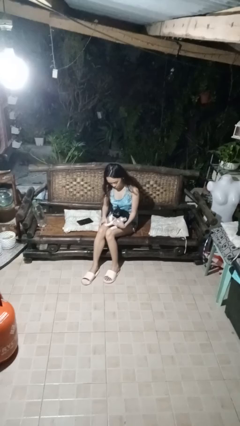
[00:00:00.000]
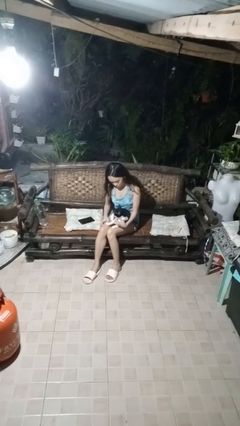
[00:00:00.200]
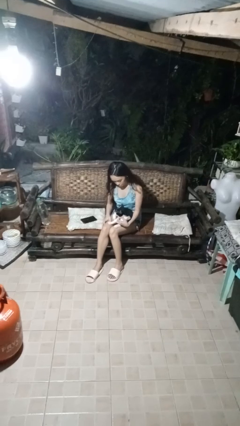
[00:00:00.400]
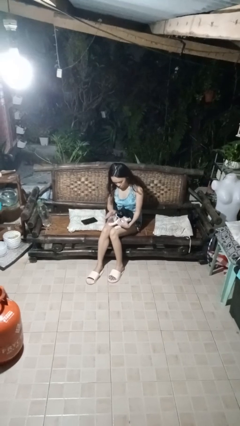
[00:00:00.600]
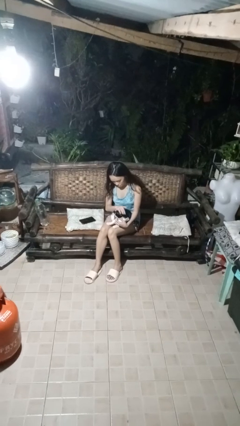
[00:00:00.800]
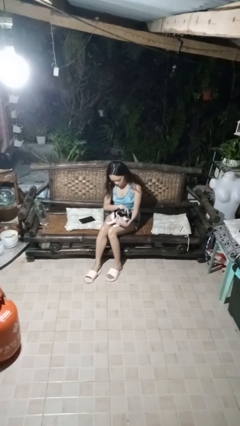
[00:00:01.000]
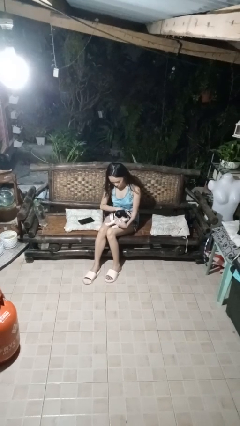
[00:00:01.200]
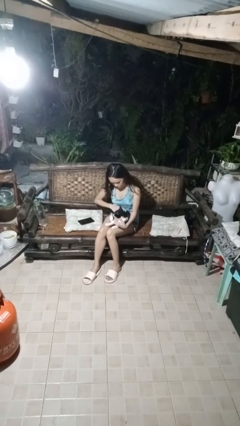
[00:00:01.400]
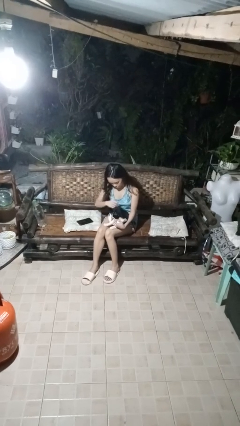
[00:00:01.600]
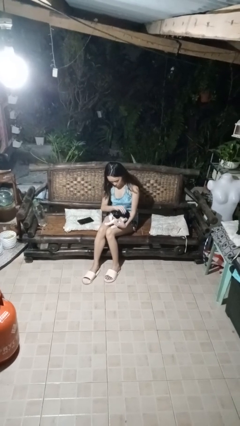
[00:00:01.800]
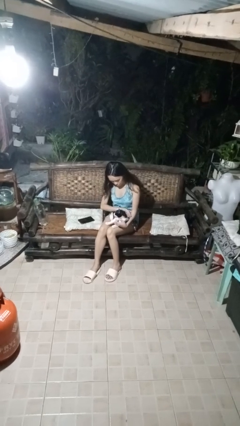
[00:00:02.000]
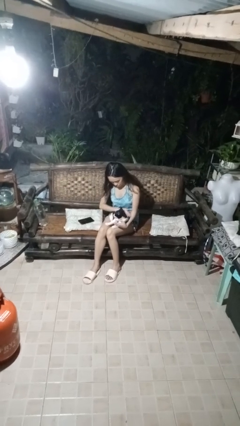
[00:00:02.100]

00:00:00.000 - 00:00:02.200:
person pets cat

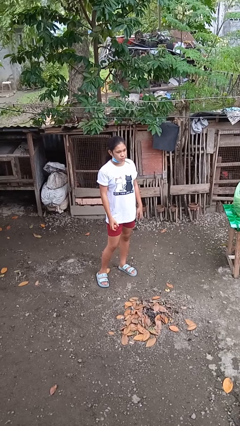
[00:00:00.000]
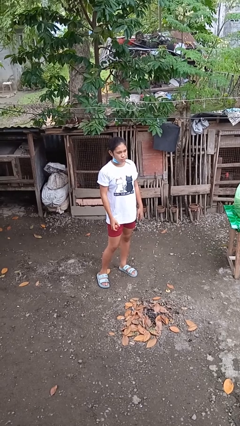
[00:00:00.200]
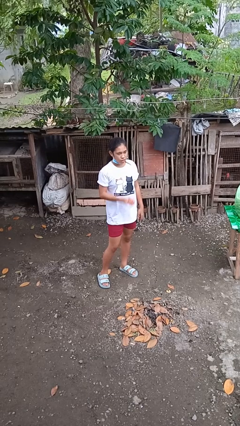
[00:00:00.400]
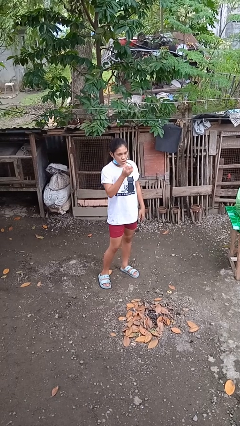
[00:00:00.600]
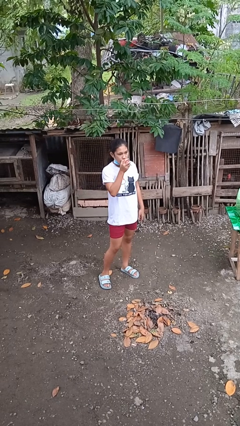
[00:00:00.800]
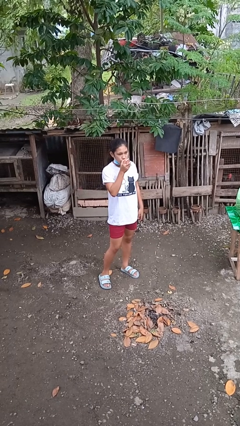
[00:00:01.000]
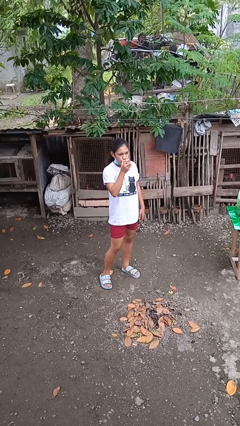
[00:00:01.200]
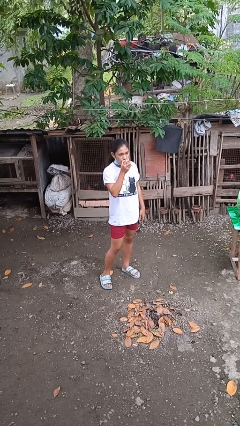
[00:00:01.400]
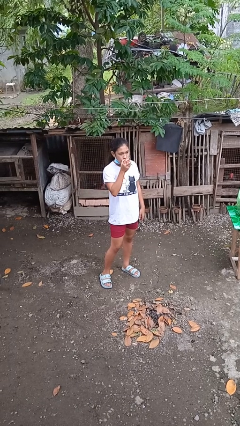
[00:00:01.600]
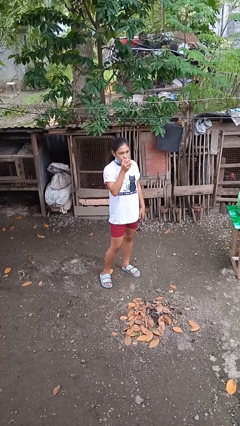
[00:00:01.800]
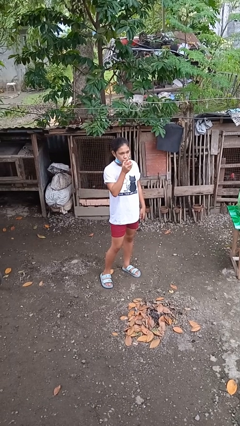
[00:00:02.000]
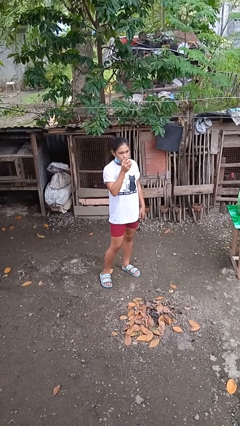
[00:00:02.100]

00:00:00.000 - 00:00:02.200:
person eats apple

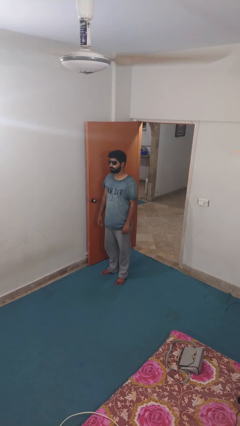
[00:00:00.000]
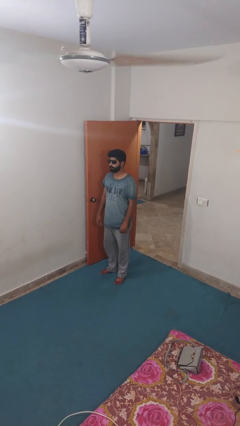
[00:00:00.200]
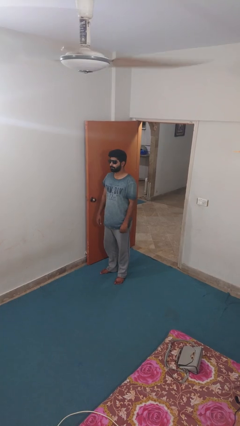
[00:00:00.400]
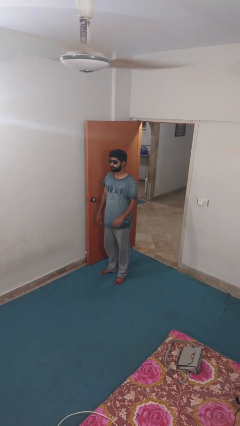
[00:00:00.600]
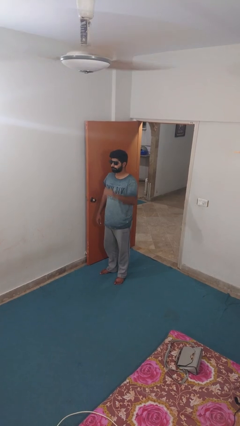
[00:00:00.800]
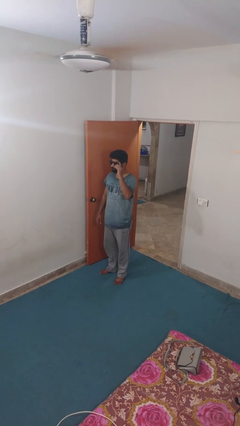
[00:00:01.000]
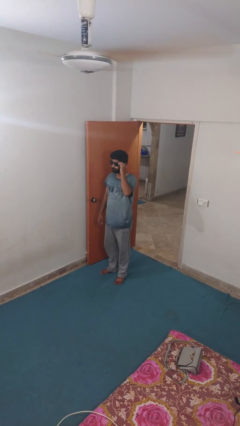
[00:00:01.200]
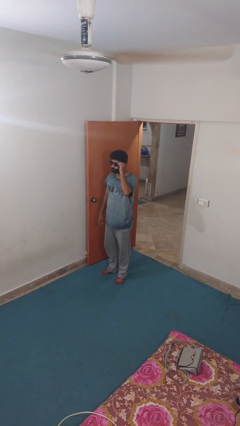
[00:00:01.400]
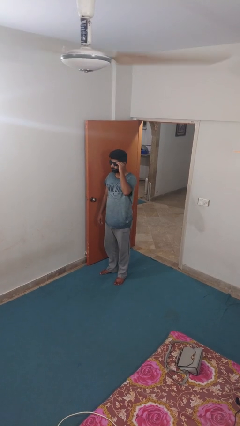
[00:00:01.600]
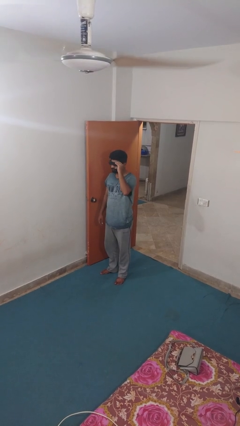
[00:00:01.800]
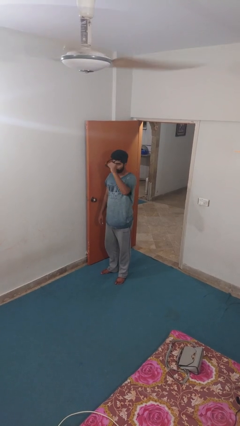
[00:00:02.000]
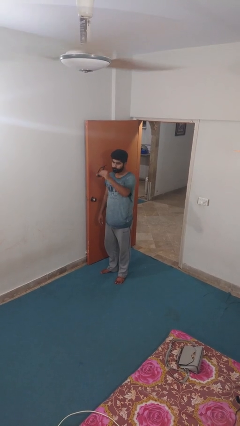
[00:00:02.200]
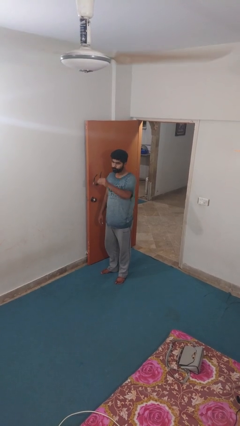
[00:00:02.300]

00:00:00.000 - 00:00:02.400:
person takes off sunglasses

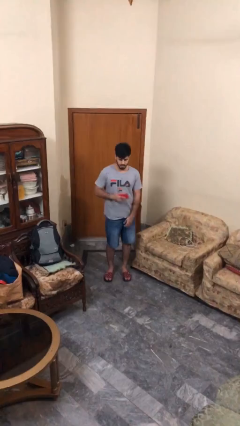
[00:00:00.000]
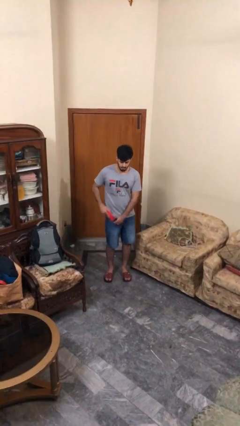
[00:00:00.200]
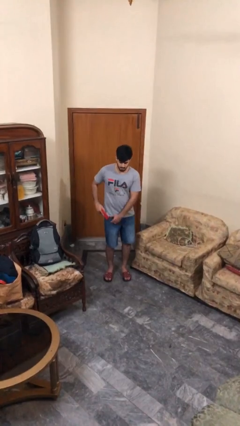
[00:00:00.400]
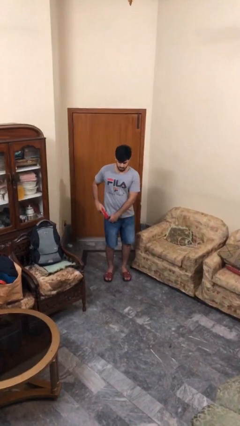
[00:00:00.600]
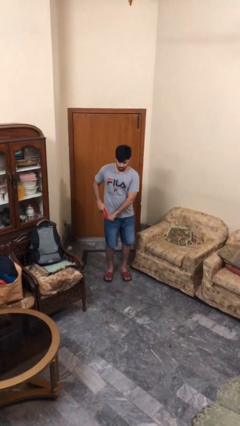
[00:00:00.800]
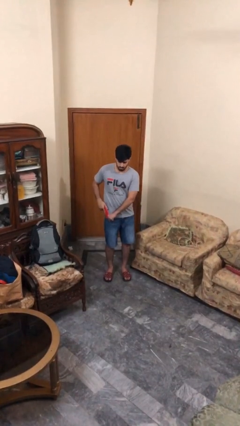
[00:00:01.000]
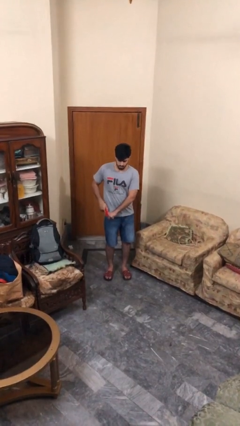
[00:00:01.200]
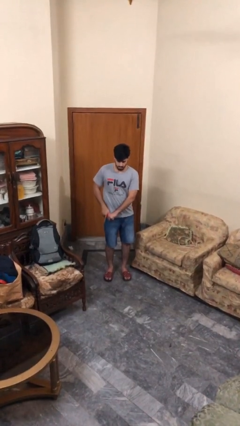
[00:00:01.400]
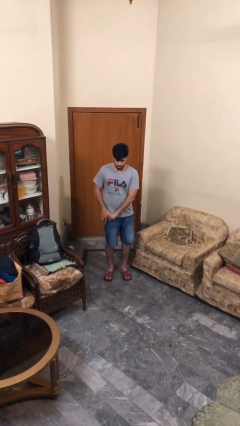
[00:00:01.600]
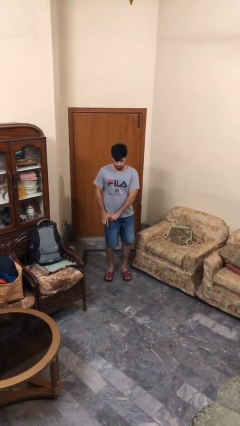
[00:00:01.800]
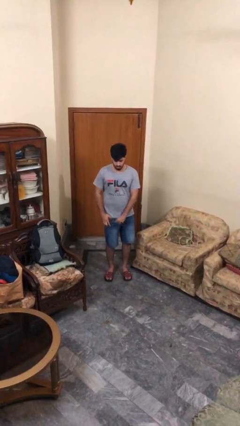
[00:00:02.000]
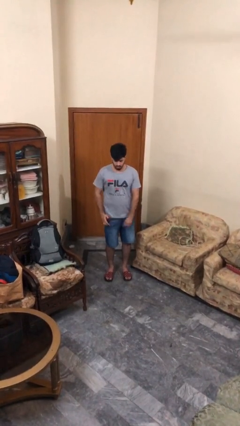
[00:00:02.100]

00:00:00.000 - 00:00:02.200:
person puts phone into pocket

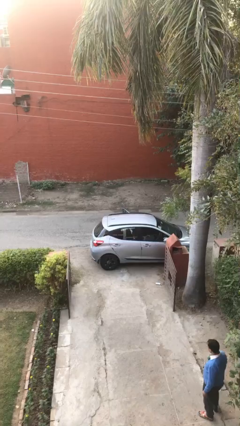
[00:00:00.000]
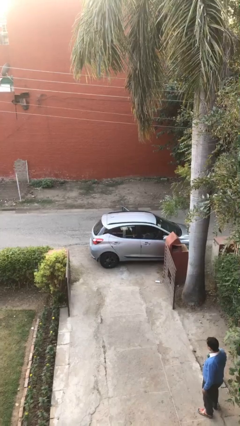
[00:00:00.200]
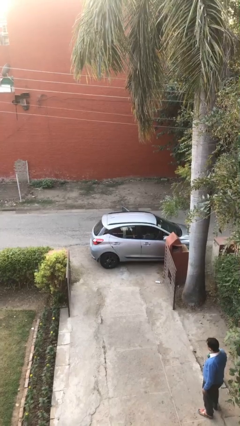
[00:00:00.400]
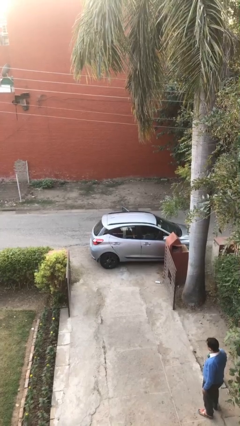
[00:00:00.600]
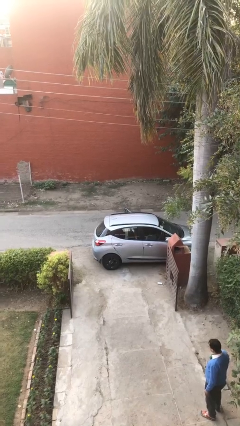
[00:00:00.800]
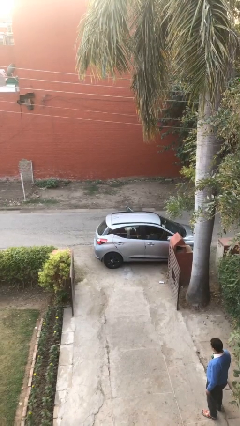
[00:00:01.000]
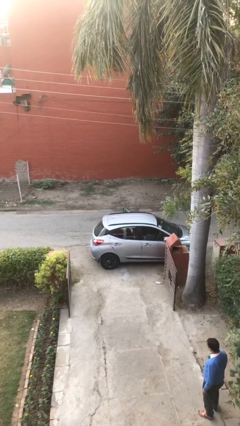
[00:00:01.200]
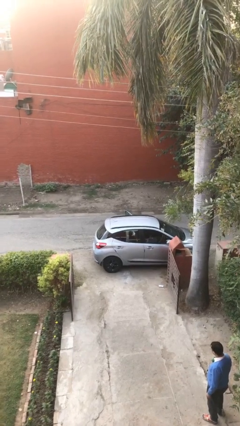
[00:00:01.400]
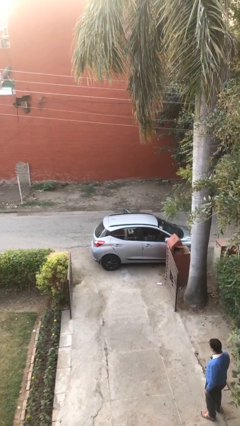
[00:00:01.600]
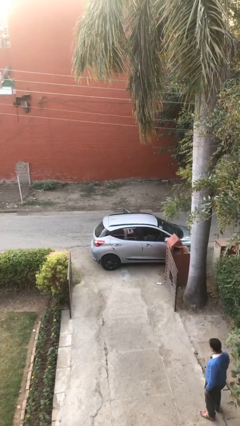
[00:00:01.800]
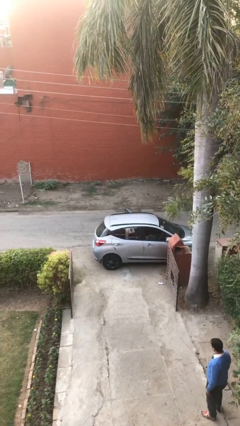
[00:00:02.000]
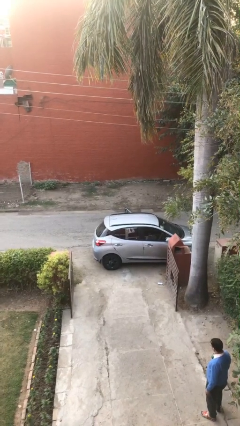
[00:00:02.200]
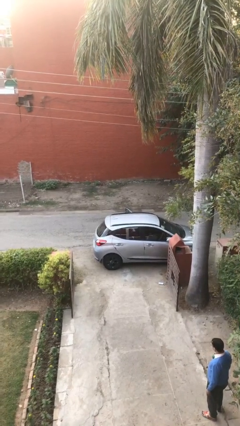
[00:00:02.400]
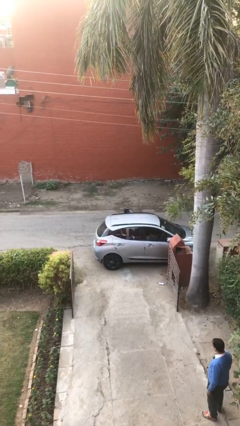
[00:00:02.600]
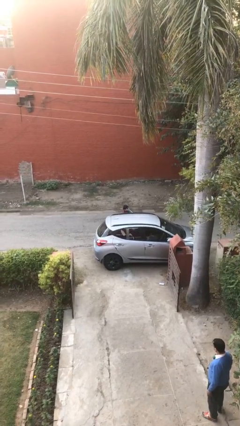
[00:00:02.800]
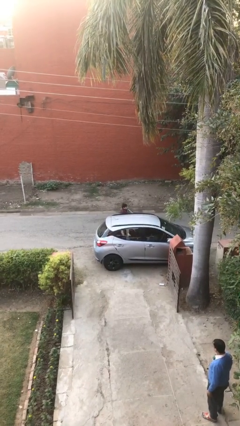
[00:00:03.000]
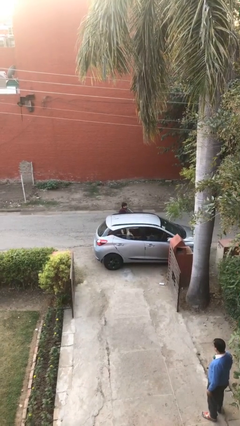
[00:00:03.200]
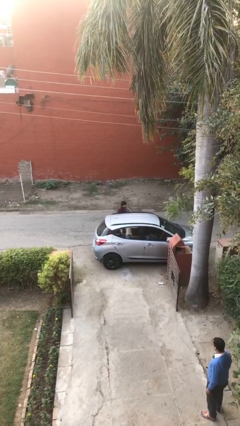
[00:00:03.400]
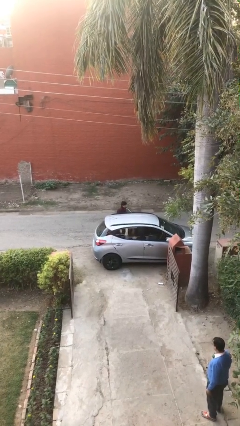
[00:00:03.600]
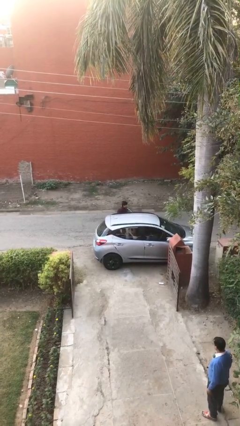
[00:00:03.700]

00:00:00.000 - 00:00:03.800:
person exits car

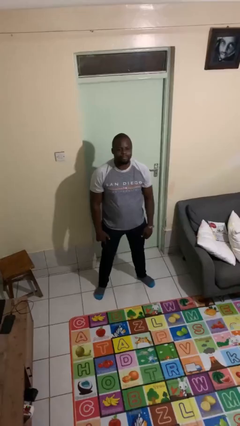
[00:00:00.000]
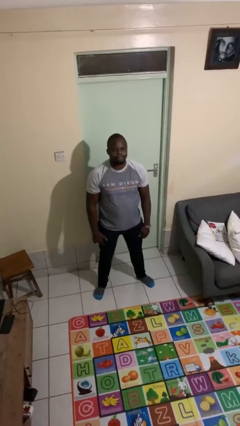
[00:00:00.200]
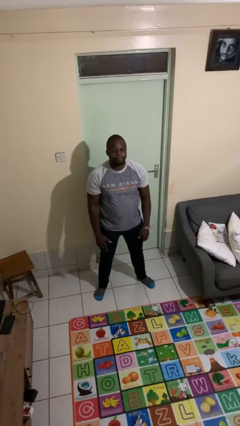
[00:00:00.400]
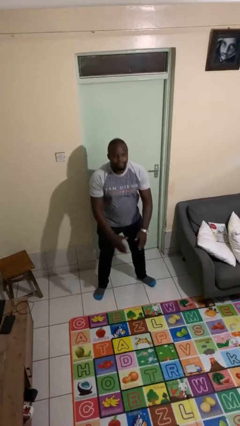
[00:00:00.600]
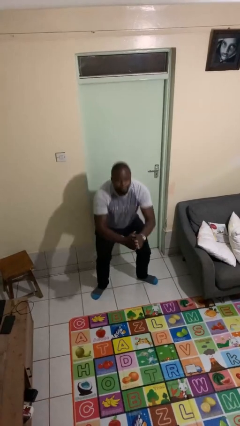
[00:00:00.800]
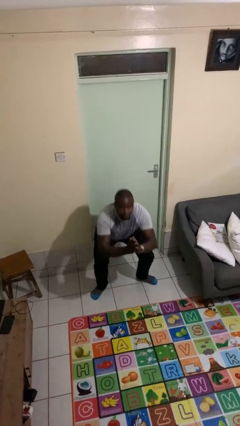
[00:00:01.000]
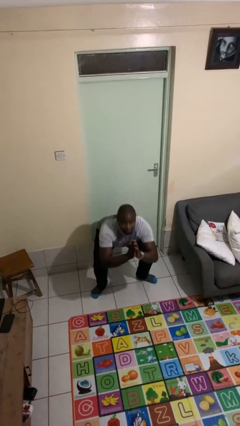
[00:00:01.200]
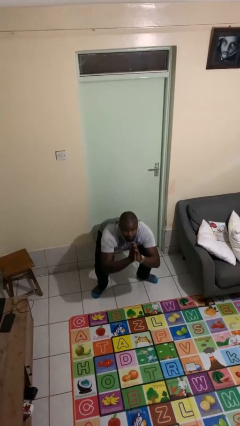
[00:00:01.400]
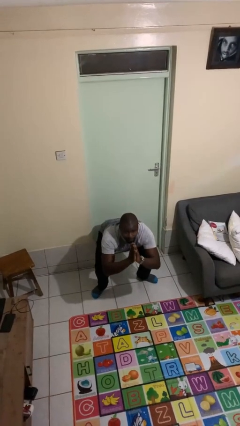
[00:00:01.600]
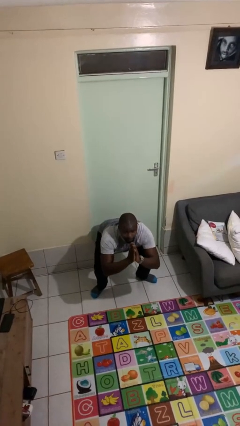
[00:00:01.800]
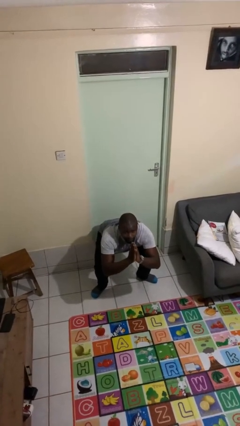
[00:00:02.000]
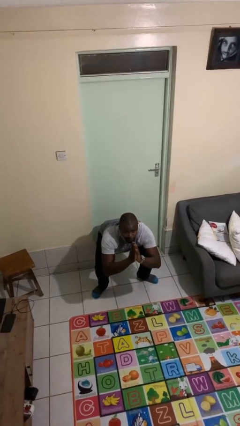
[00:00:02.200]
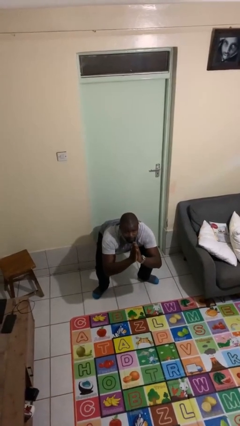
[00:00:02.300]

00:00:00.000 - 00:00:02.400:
person squats

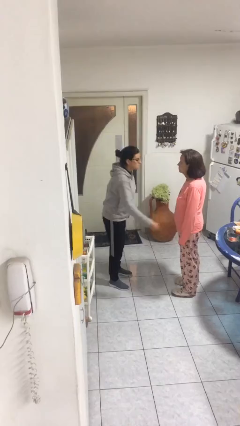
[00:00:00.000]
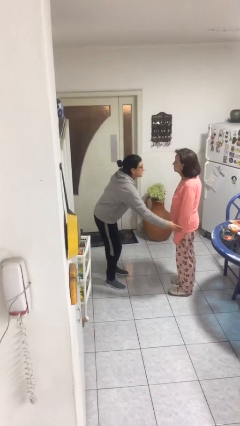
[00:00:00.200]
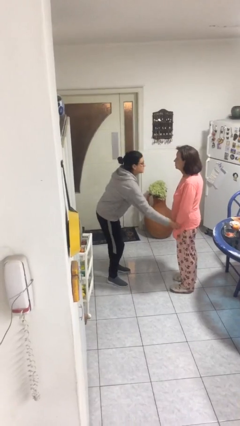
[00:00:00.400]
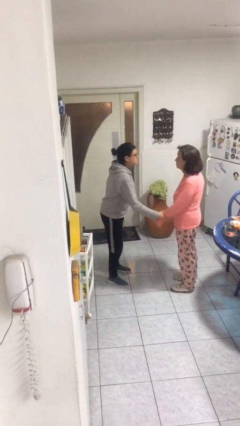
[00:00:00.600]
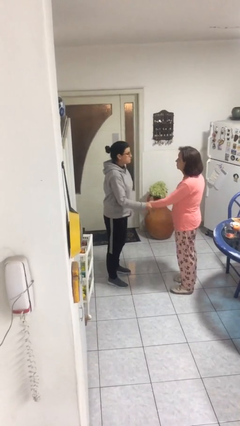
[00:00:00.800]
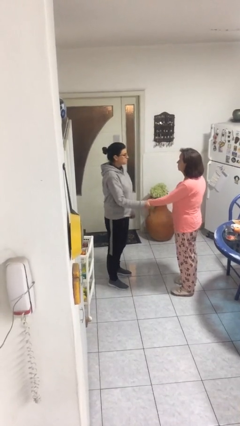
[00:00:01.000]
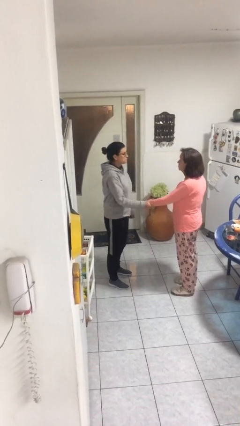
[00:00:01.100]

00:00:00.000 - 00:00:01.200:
person grabs person by forearm

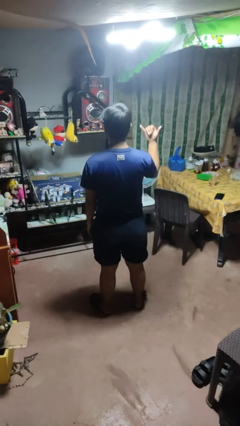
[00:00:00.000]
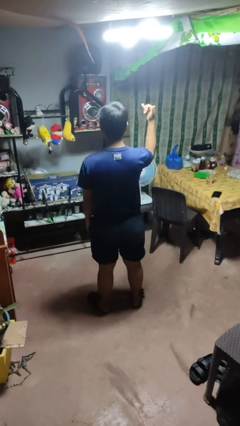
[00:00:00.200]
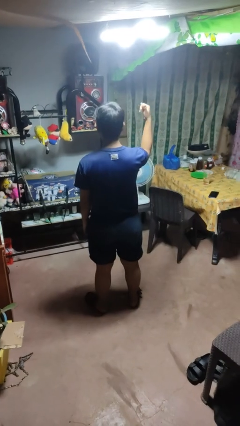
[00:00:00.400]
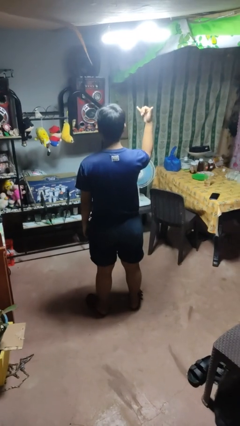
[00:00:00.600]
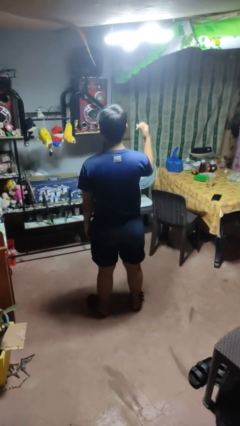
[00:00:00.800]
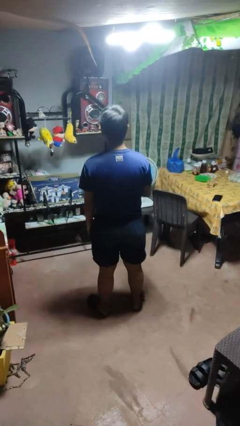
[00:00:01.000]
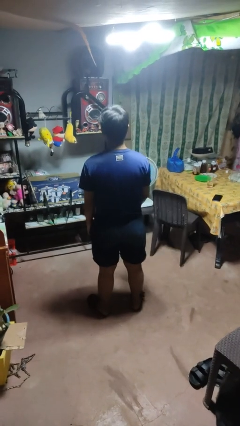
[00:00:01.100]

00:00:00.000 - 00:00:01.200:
person gestures hang loose
